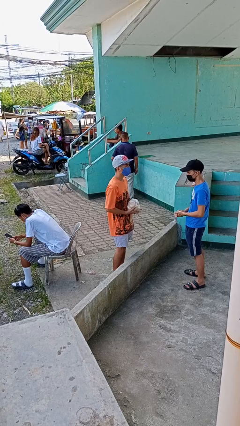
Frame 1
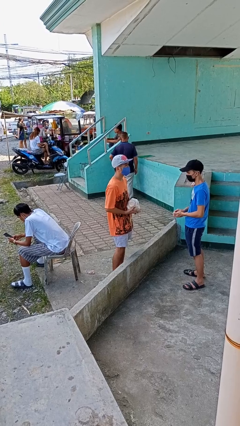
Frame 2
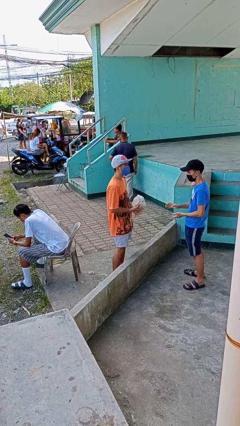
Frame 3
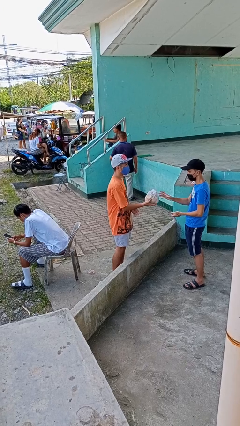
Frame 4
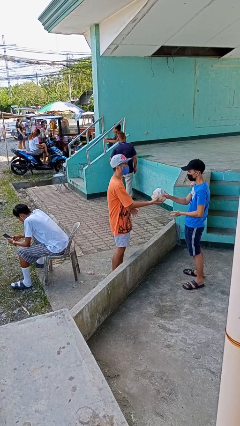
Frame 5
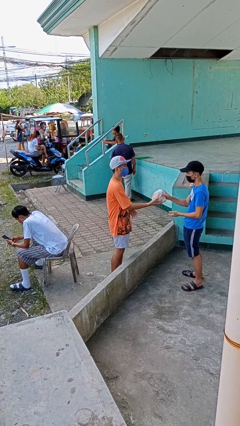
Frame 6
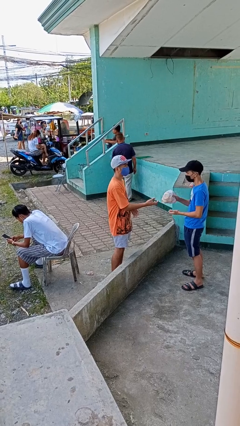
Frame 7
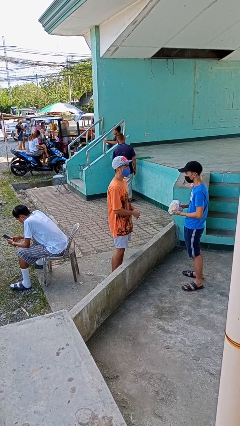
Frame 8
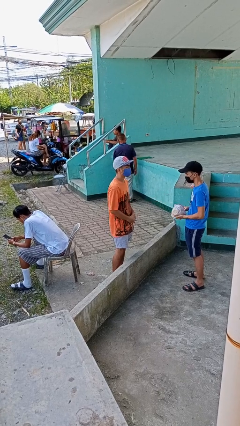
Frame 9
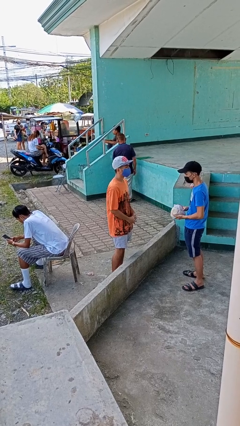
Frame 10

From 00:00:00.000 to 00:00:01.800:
person transfers object to person

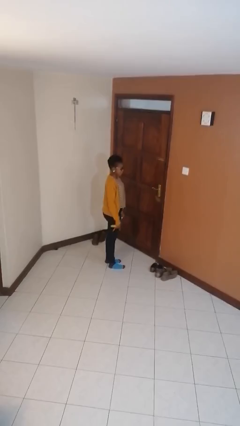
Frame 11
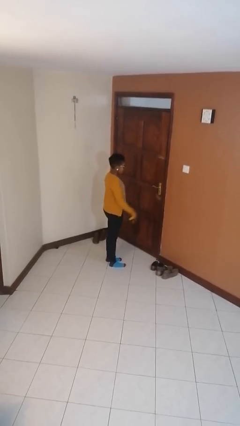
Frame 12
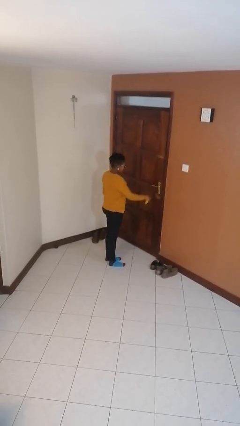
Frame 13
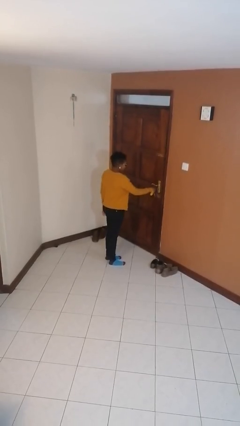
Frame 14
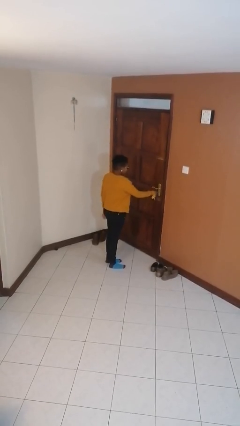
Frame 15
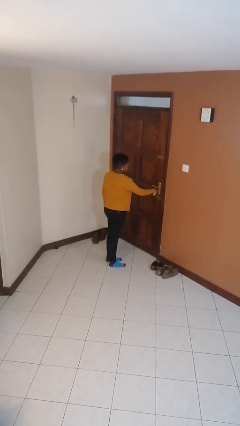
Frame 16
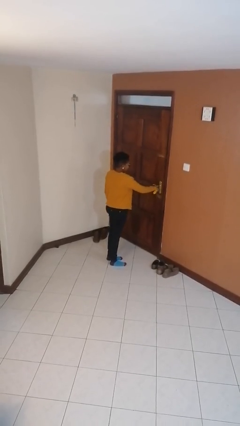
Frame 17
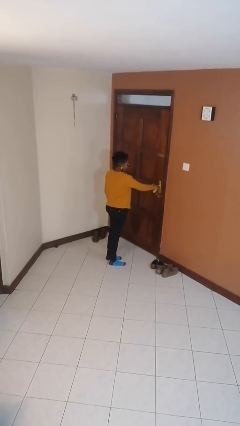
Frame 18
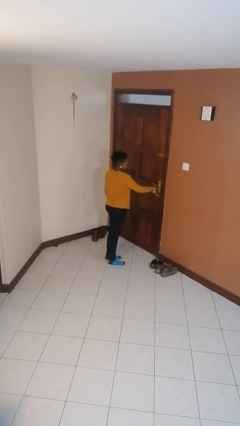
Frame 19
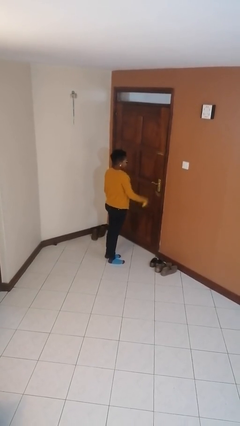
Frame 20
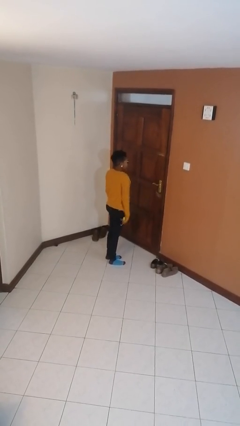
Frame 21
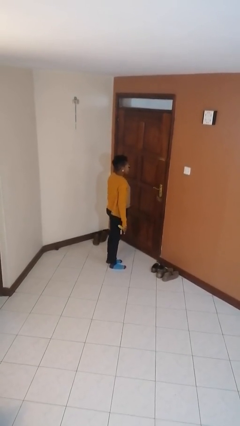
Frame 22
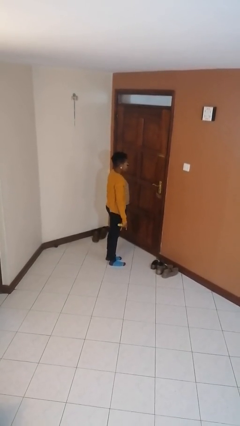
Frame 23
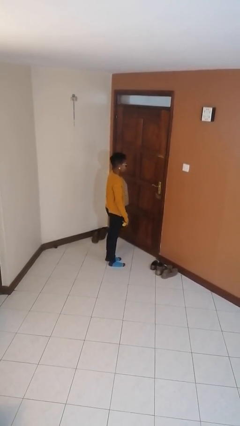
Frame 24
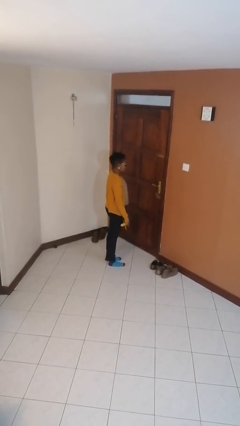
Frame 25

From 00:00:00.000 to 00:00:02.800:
person unlocks door with keys

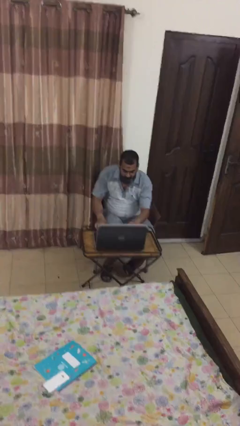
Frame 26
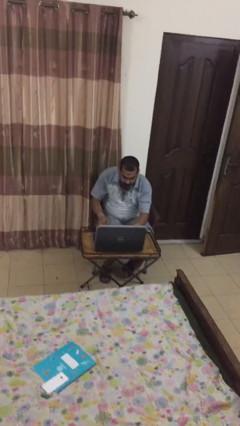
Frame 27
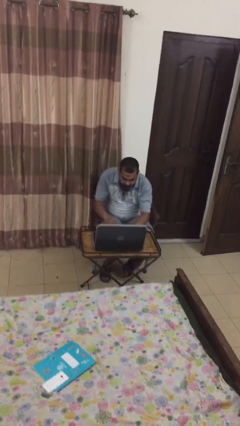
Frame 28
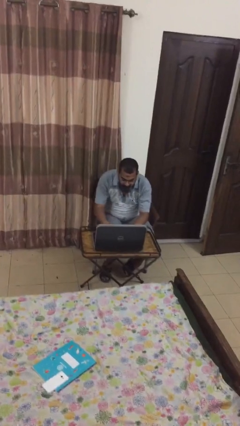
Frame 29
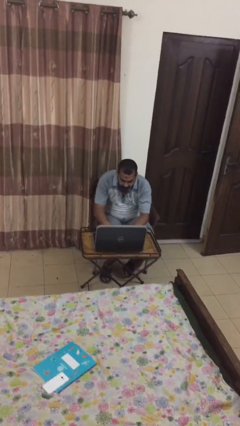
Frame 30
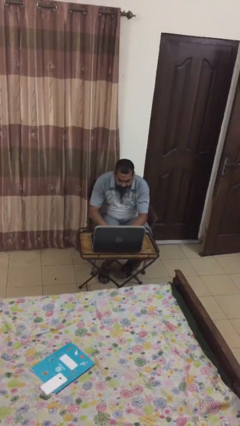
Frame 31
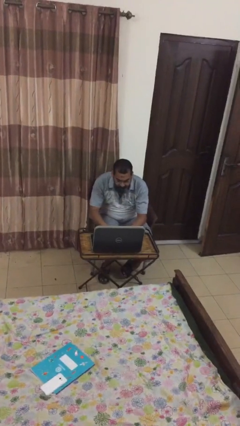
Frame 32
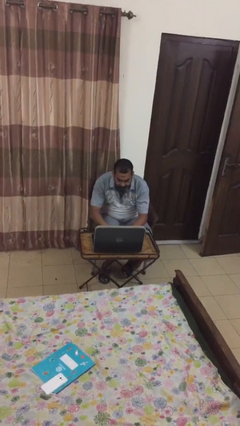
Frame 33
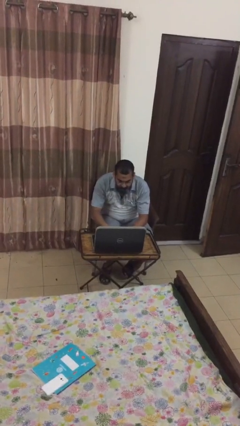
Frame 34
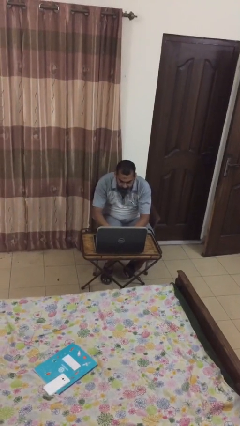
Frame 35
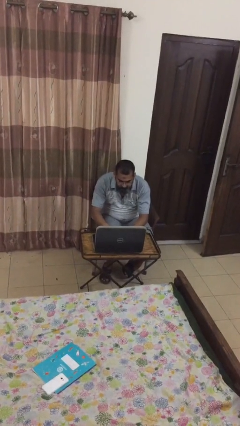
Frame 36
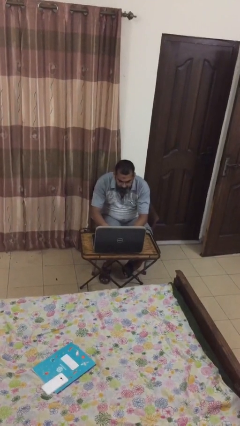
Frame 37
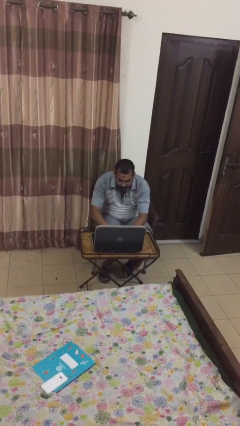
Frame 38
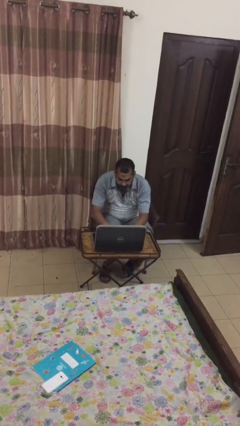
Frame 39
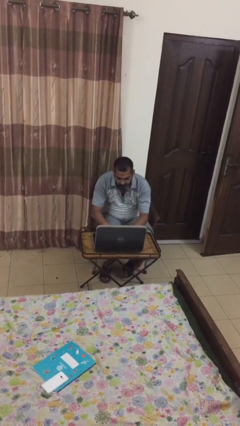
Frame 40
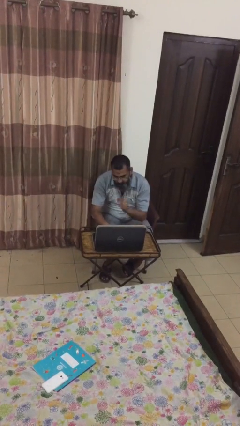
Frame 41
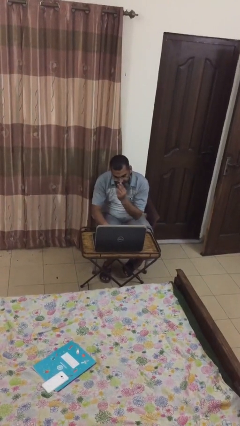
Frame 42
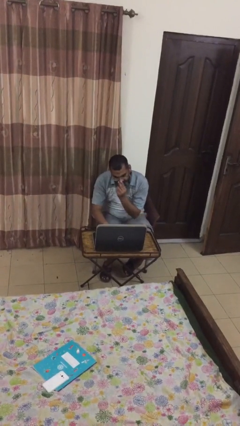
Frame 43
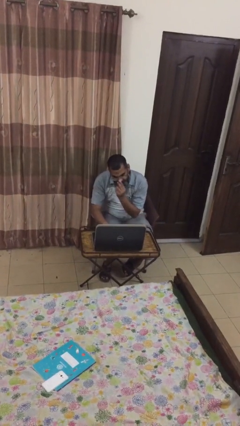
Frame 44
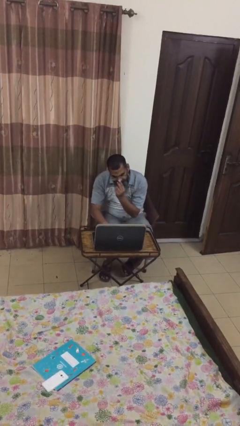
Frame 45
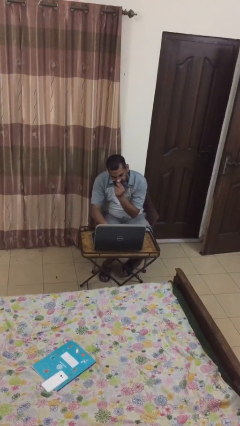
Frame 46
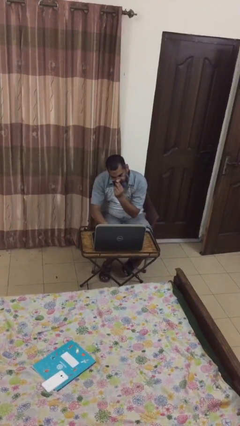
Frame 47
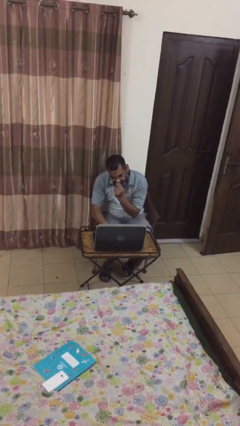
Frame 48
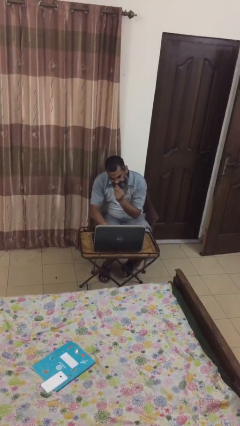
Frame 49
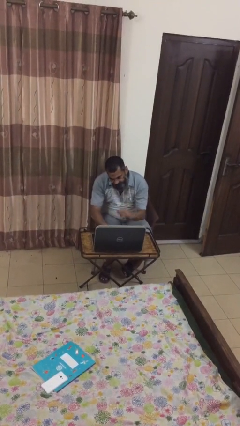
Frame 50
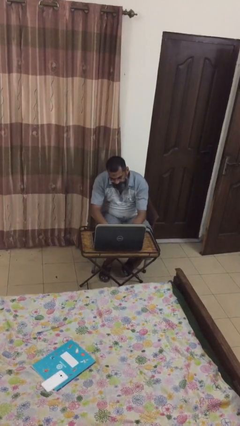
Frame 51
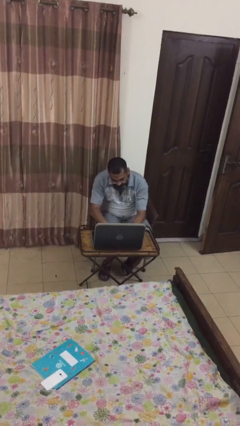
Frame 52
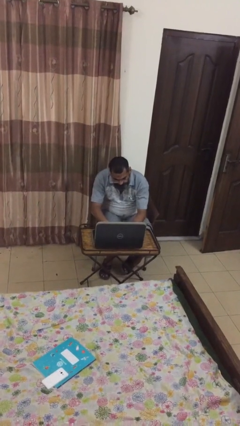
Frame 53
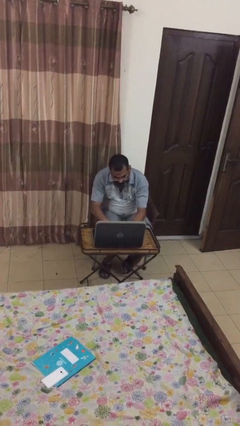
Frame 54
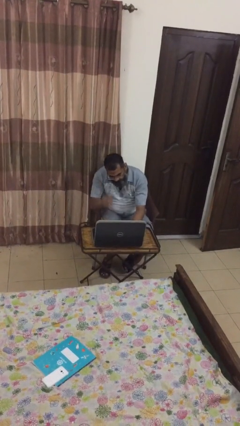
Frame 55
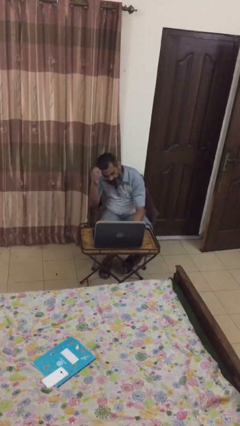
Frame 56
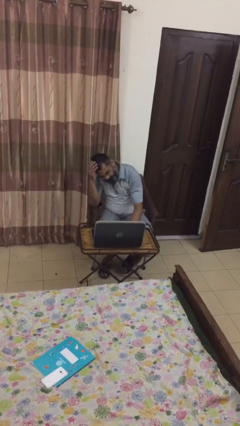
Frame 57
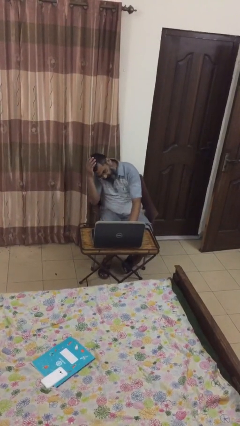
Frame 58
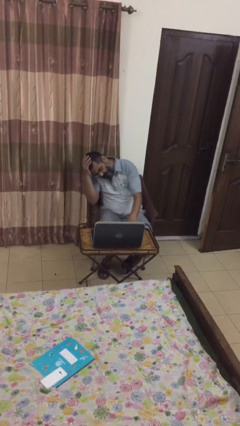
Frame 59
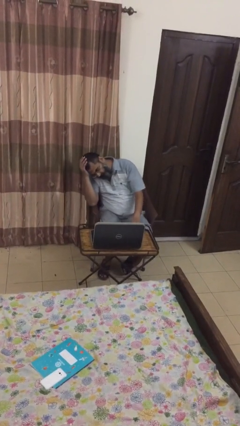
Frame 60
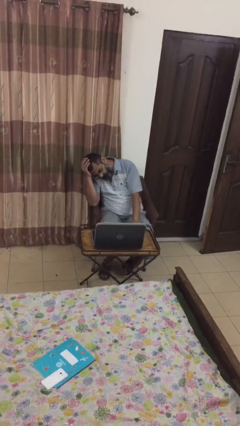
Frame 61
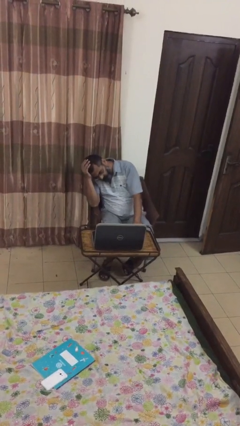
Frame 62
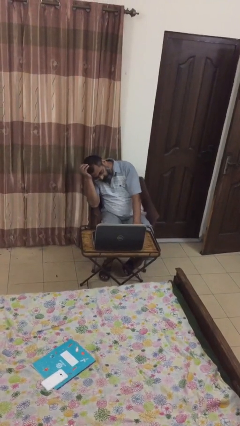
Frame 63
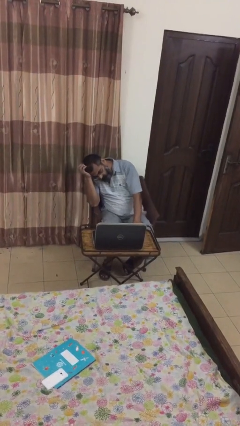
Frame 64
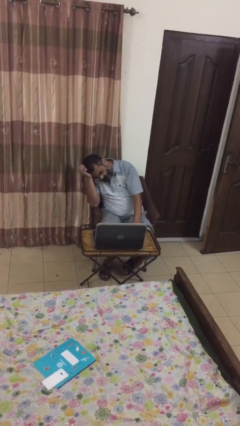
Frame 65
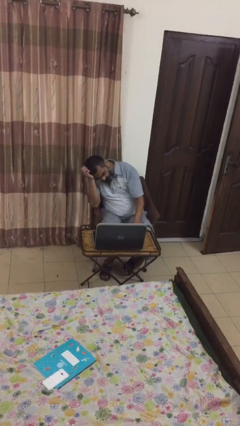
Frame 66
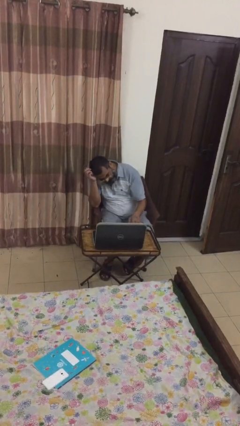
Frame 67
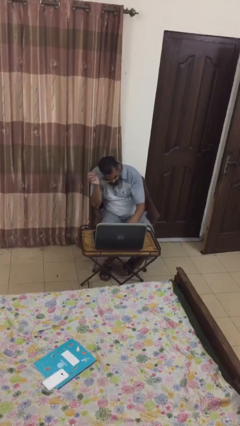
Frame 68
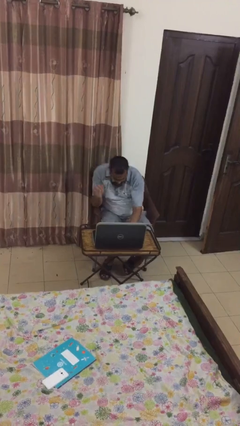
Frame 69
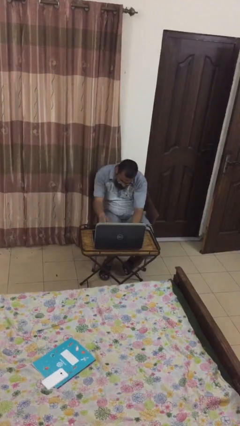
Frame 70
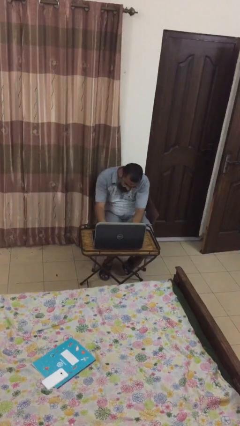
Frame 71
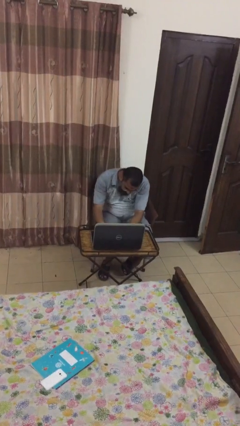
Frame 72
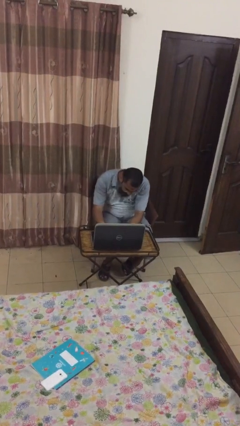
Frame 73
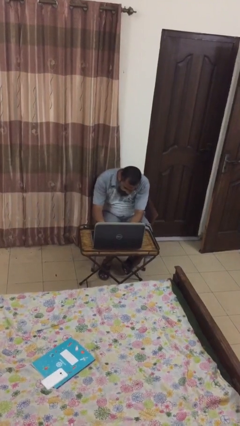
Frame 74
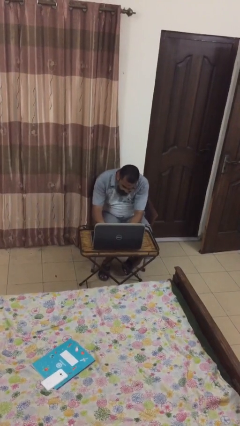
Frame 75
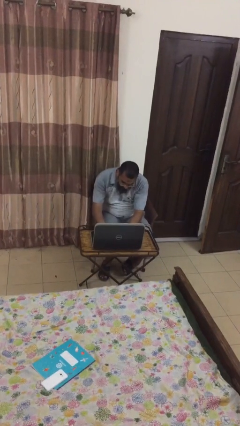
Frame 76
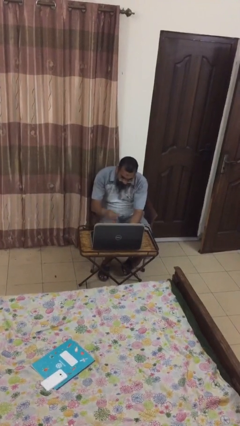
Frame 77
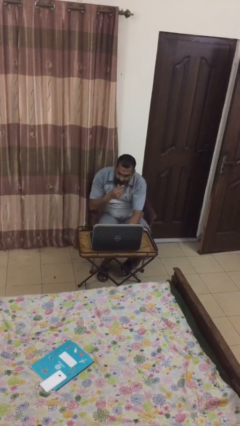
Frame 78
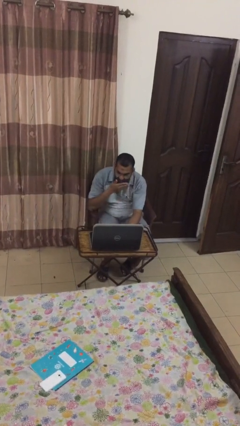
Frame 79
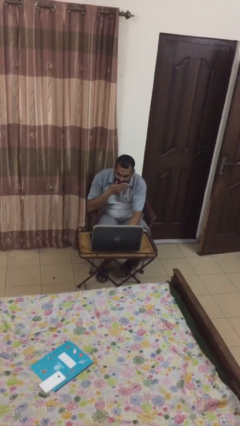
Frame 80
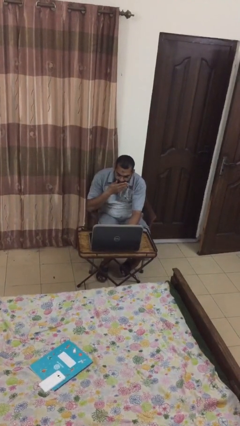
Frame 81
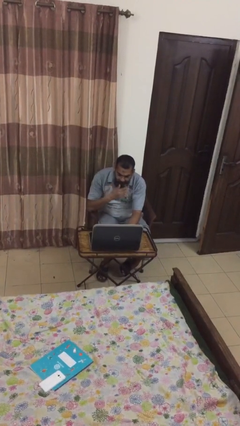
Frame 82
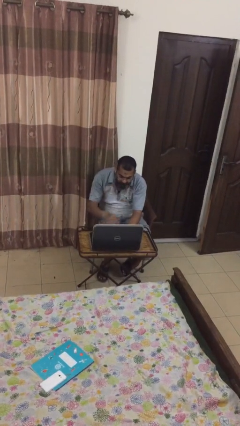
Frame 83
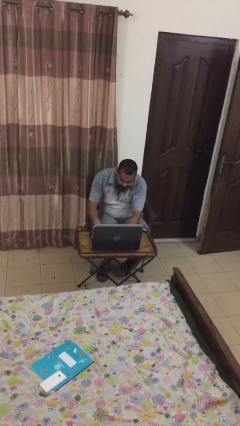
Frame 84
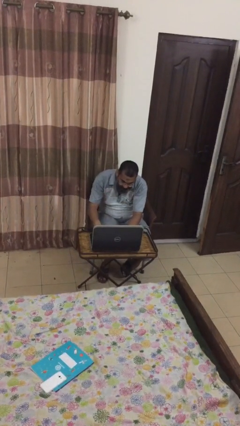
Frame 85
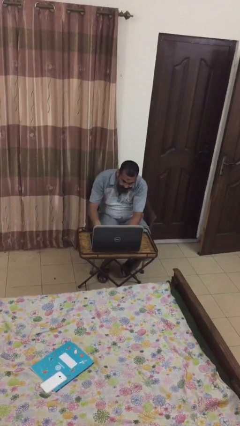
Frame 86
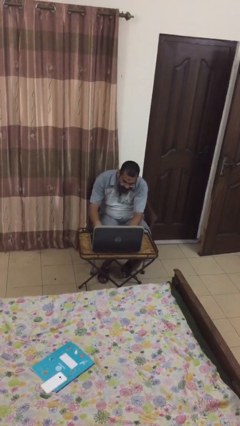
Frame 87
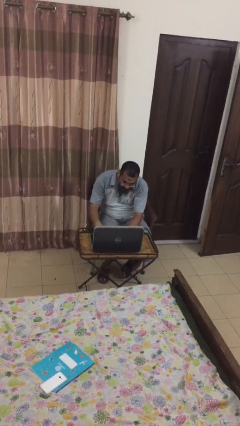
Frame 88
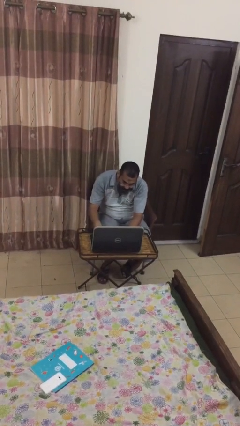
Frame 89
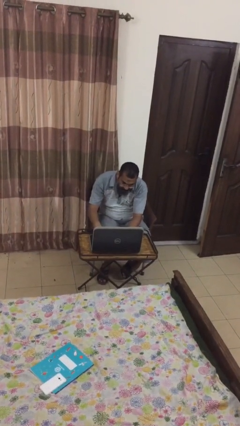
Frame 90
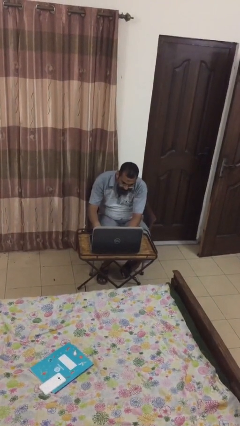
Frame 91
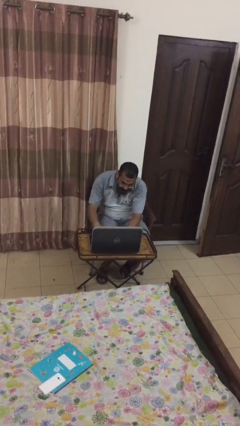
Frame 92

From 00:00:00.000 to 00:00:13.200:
person interacts with laptop

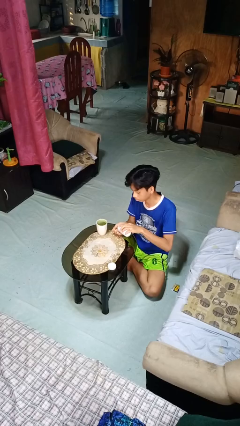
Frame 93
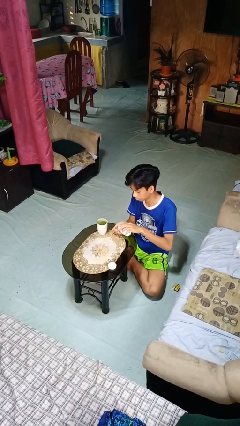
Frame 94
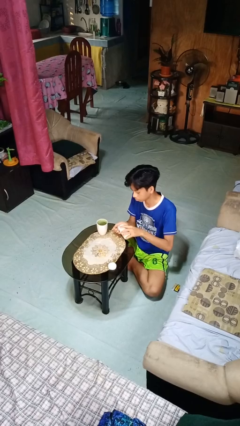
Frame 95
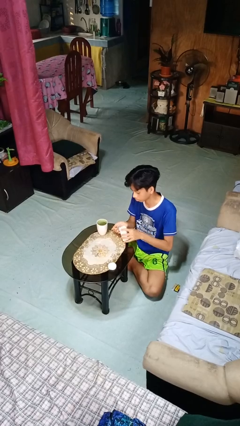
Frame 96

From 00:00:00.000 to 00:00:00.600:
person takes medicine pills
